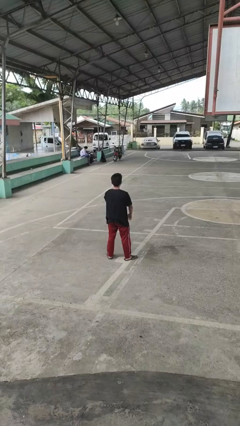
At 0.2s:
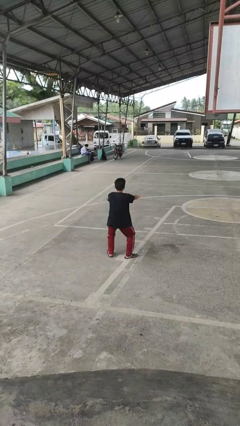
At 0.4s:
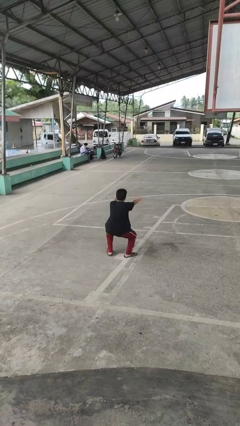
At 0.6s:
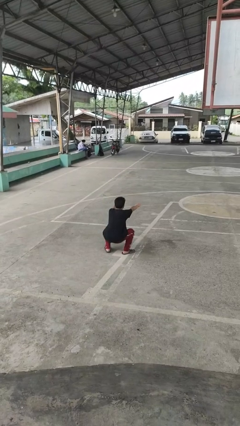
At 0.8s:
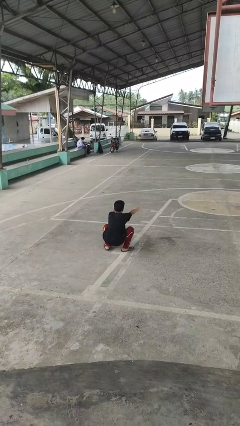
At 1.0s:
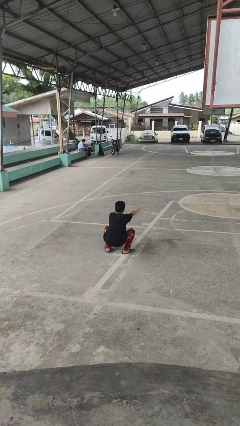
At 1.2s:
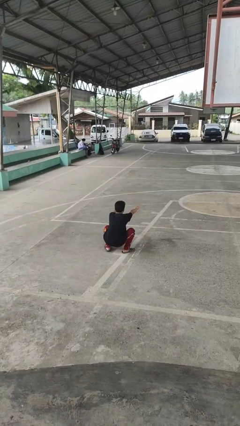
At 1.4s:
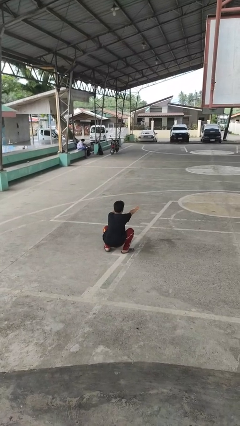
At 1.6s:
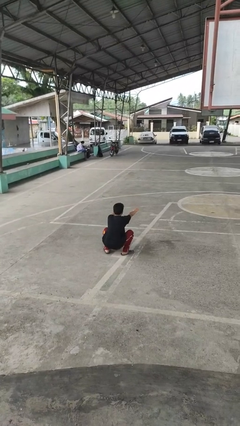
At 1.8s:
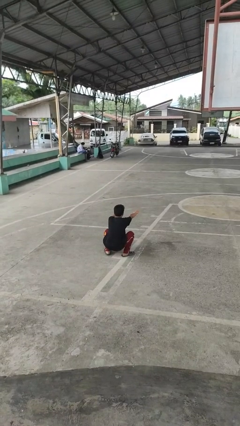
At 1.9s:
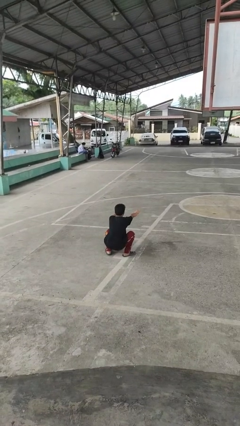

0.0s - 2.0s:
person squats

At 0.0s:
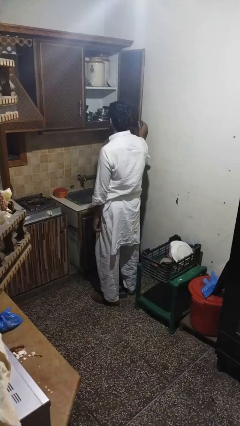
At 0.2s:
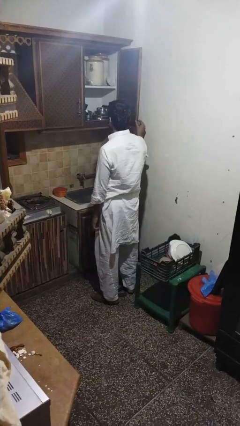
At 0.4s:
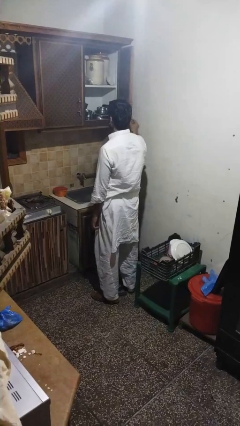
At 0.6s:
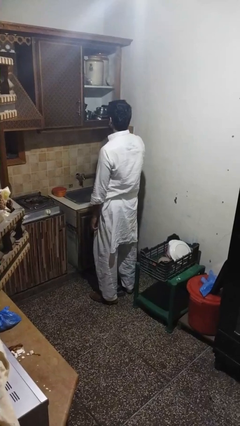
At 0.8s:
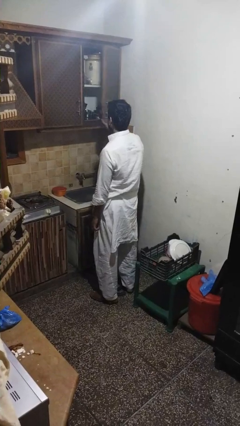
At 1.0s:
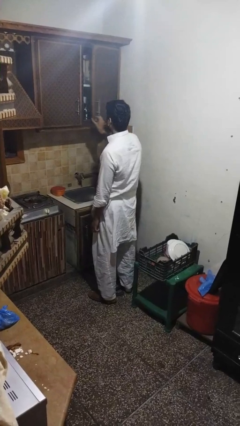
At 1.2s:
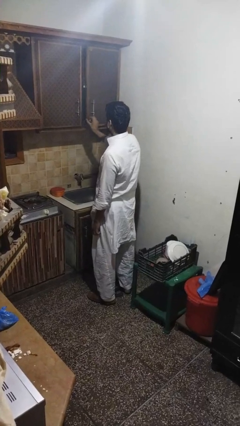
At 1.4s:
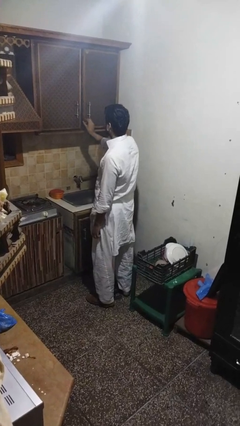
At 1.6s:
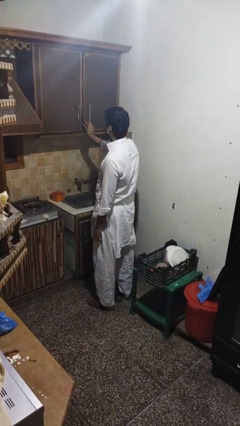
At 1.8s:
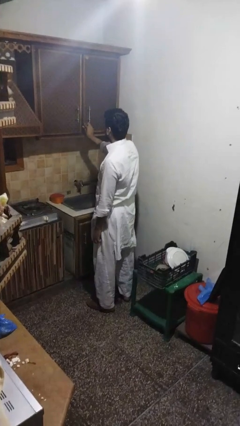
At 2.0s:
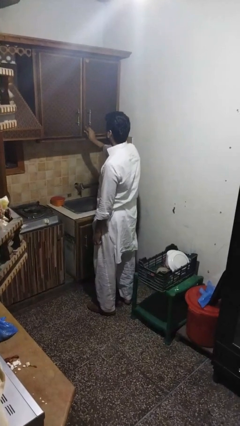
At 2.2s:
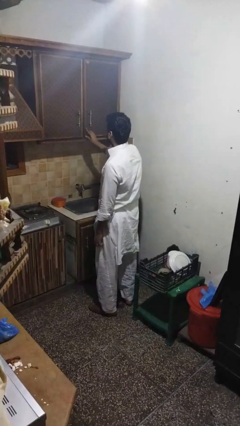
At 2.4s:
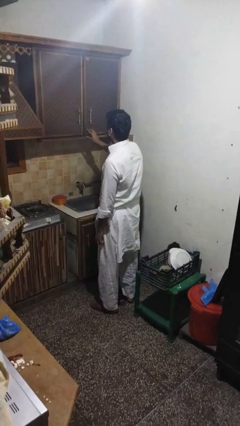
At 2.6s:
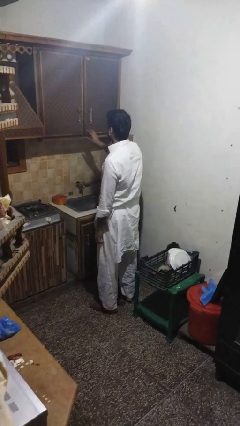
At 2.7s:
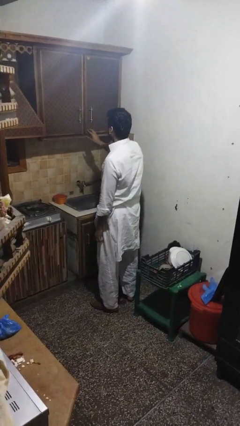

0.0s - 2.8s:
person closes cabinet

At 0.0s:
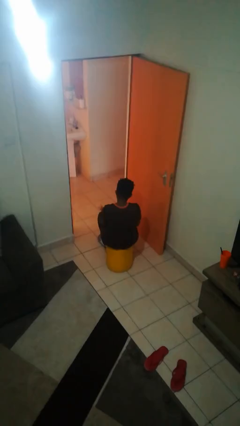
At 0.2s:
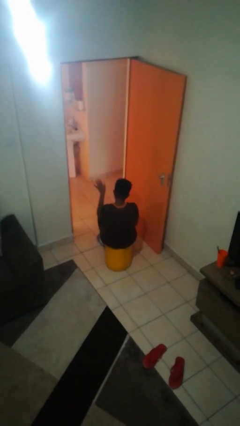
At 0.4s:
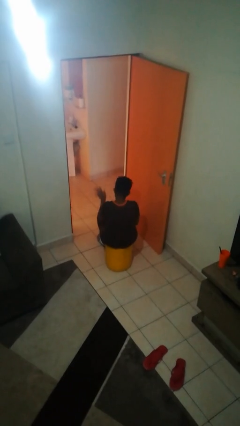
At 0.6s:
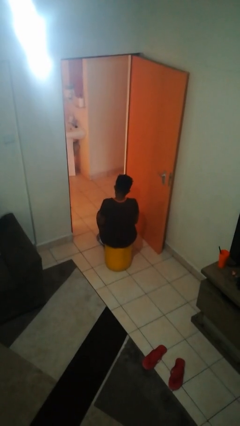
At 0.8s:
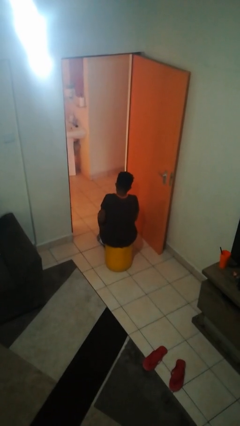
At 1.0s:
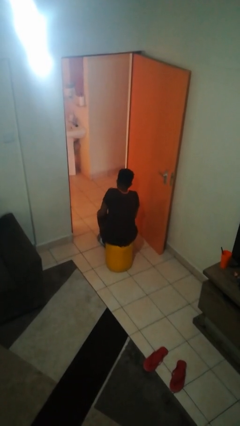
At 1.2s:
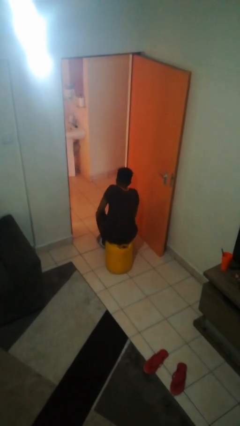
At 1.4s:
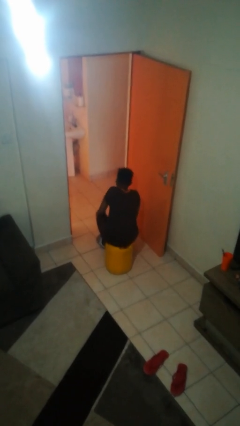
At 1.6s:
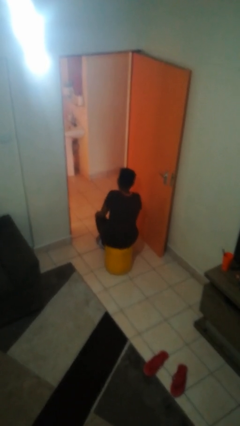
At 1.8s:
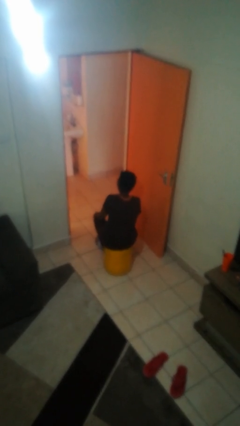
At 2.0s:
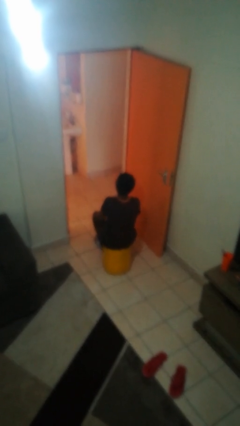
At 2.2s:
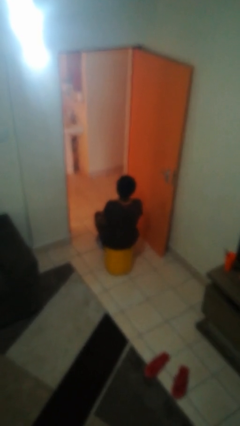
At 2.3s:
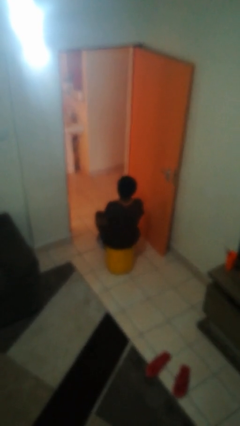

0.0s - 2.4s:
person slaps hands on thighs

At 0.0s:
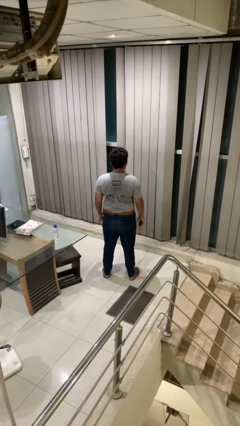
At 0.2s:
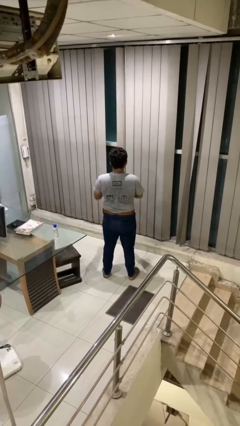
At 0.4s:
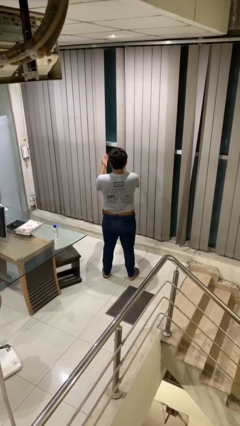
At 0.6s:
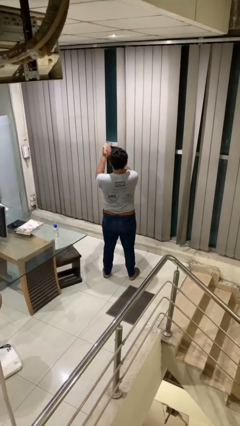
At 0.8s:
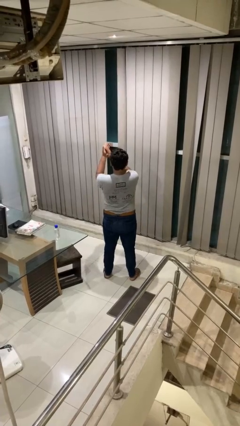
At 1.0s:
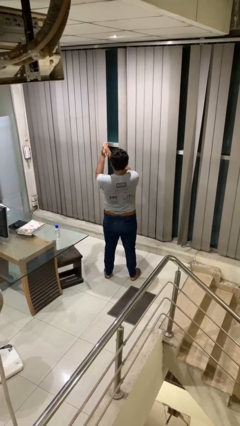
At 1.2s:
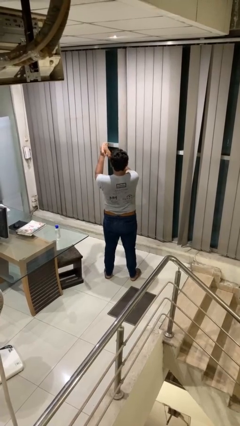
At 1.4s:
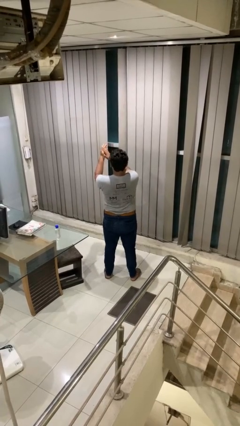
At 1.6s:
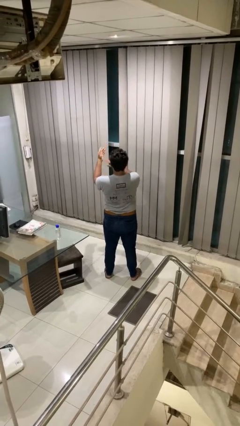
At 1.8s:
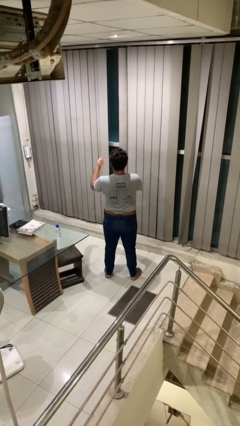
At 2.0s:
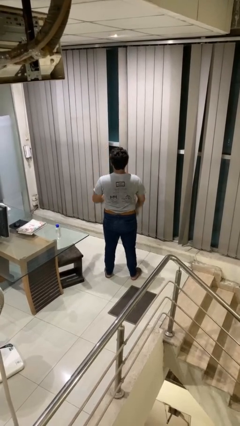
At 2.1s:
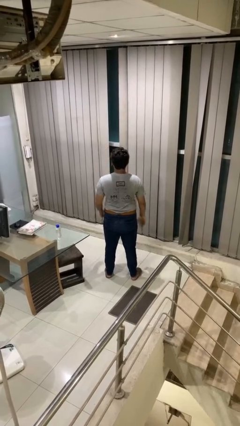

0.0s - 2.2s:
person claps hands

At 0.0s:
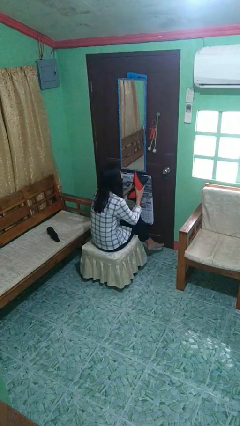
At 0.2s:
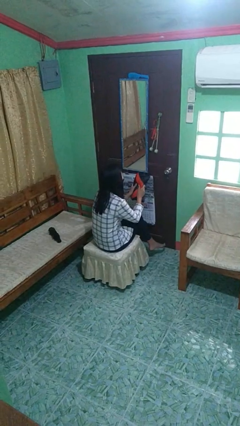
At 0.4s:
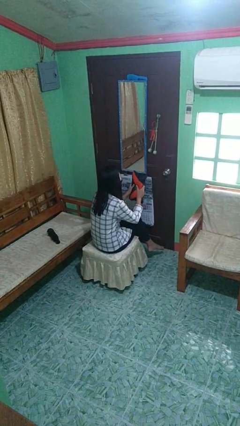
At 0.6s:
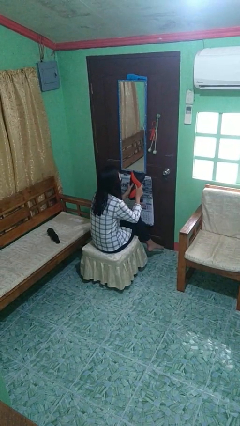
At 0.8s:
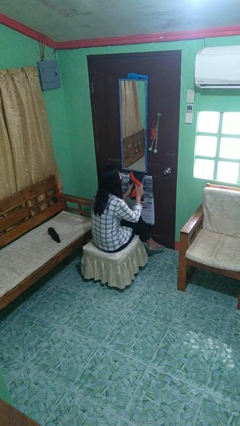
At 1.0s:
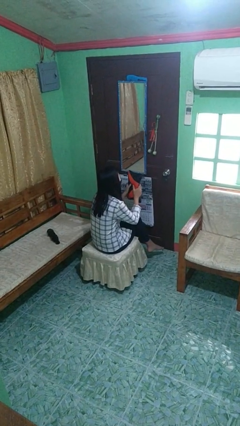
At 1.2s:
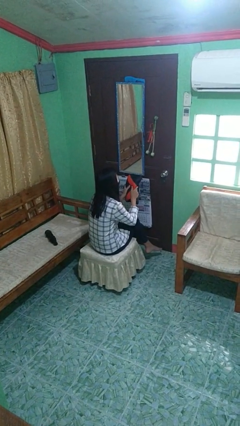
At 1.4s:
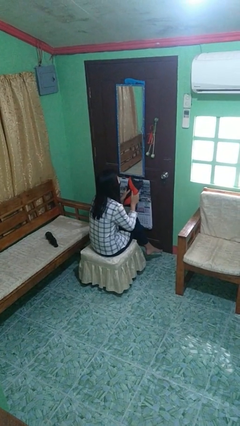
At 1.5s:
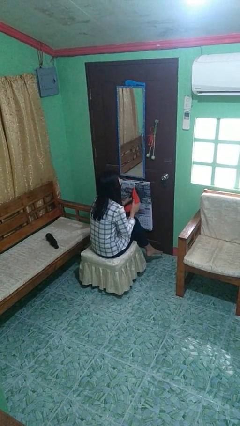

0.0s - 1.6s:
person squeezes object

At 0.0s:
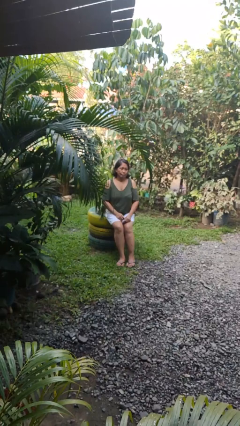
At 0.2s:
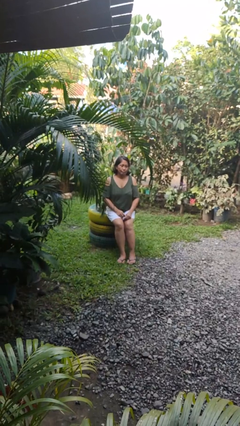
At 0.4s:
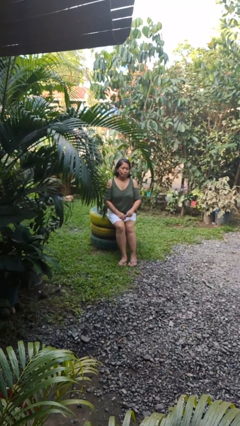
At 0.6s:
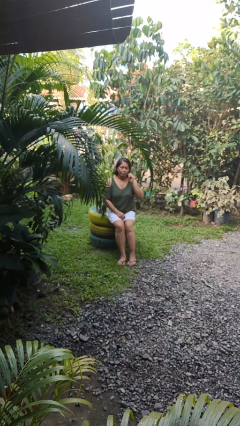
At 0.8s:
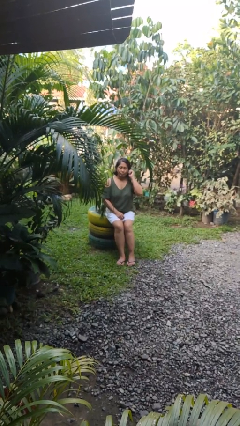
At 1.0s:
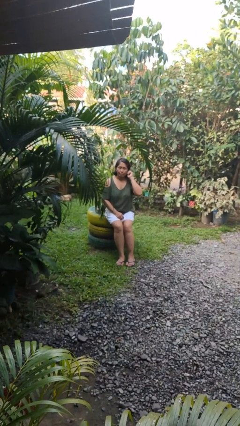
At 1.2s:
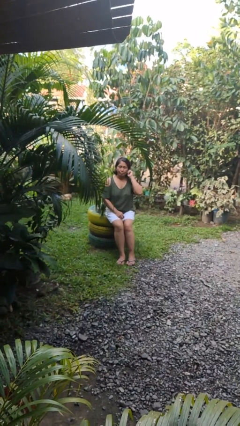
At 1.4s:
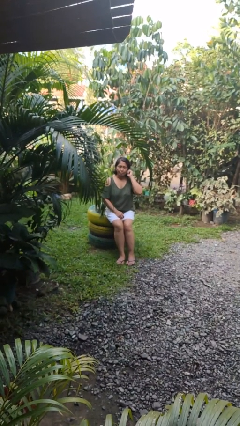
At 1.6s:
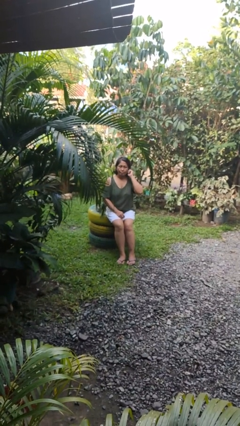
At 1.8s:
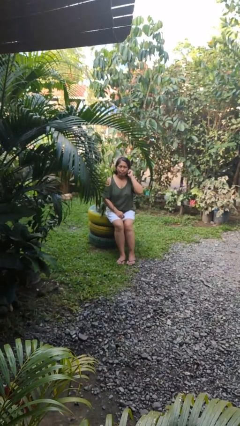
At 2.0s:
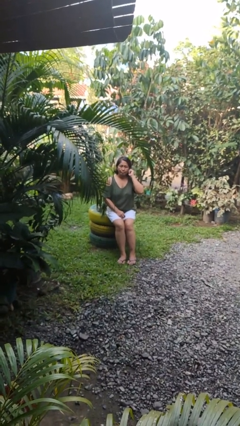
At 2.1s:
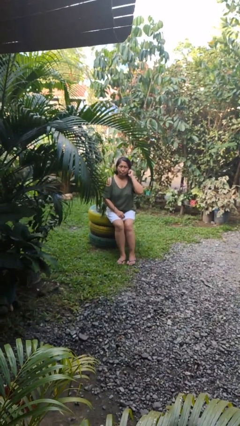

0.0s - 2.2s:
person touches earlobe

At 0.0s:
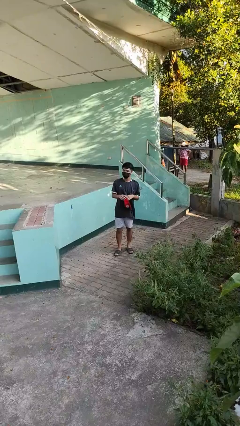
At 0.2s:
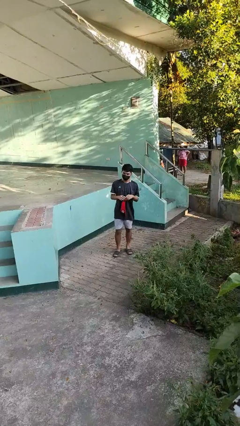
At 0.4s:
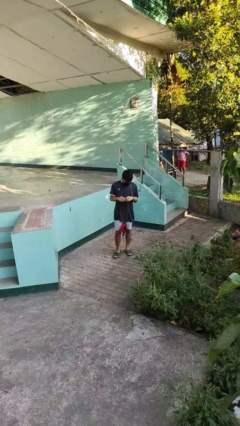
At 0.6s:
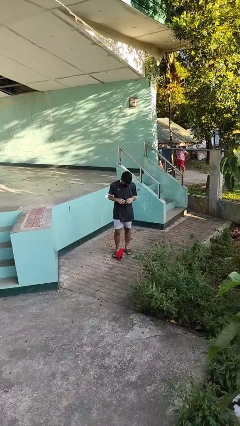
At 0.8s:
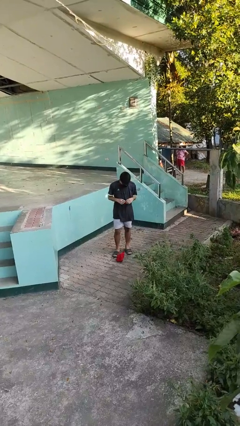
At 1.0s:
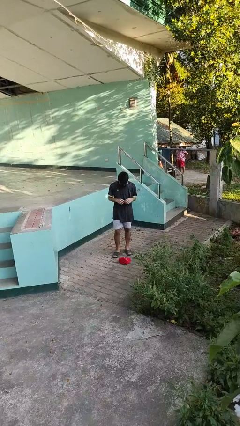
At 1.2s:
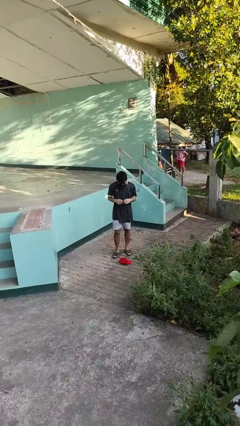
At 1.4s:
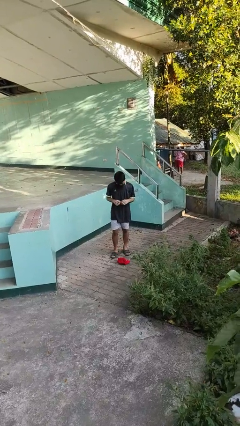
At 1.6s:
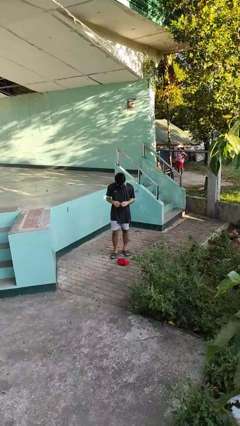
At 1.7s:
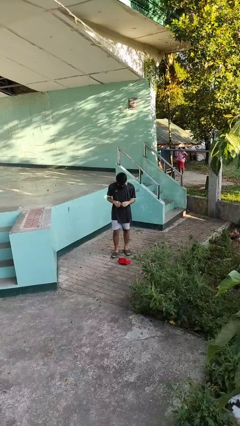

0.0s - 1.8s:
person drops object

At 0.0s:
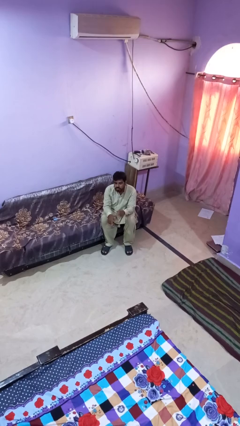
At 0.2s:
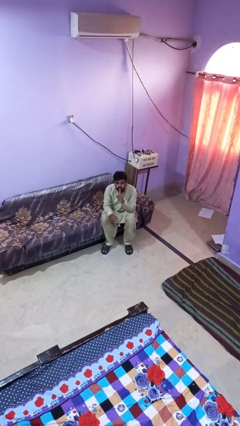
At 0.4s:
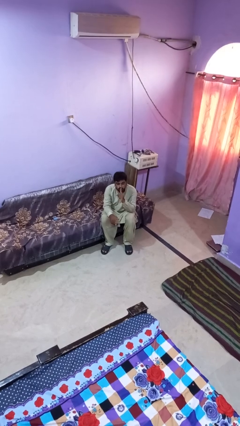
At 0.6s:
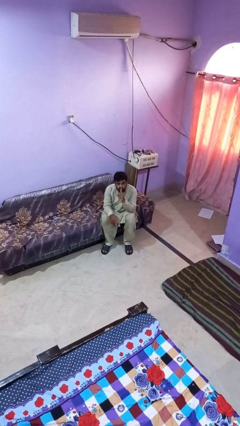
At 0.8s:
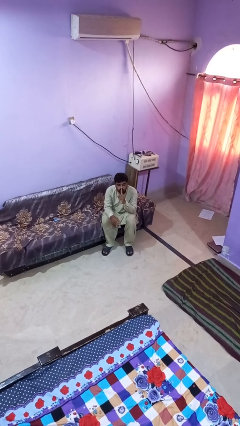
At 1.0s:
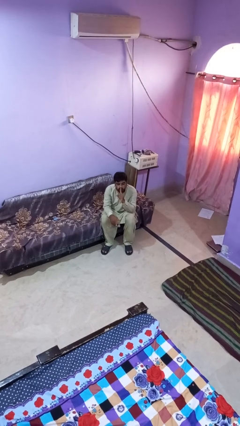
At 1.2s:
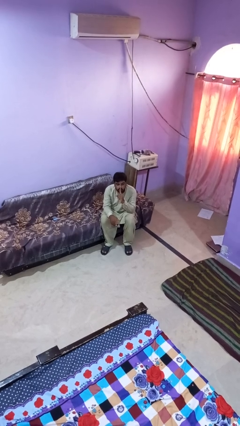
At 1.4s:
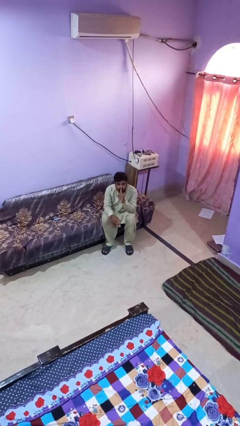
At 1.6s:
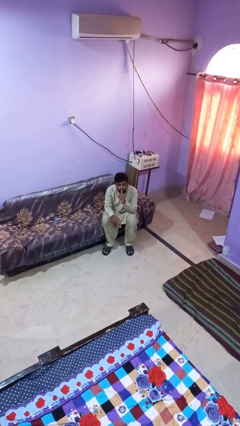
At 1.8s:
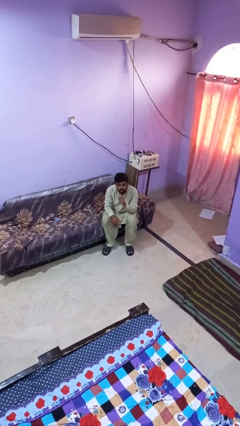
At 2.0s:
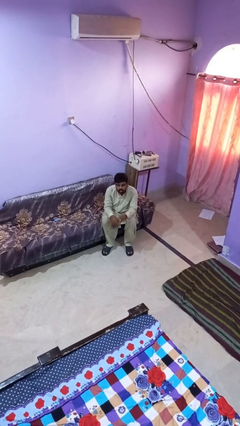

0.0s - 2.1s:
person gestures be quiet

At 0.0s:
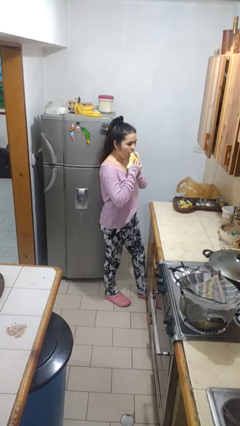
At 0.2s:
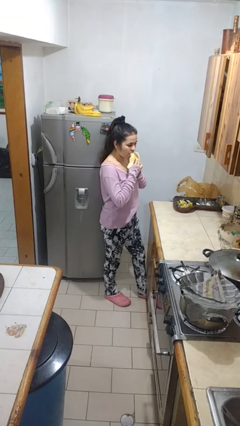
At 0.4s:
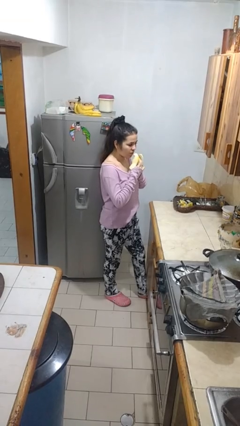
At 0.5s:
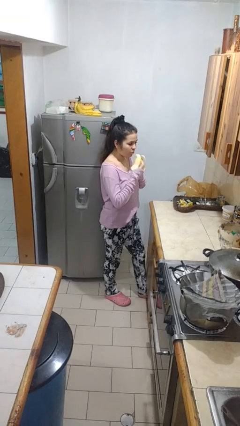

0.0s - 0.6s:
person eats banana
